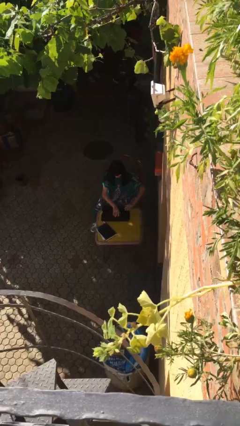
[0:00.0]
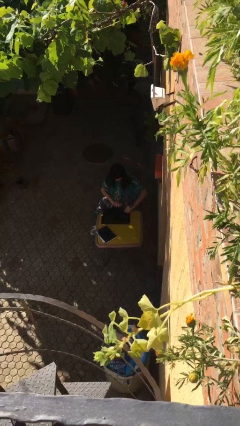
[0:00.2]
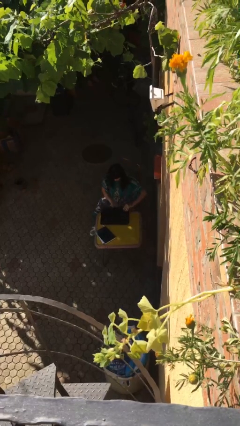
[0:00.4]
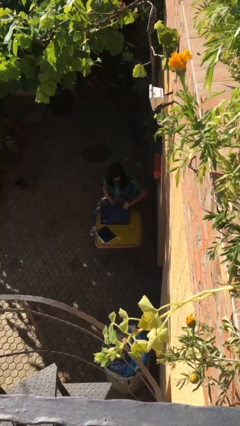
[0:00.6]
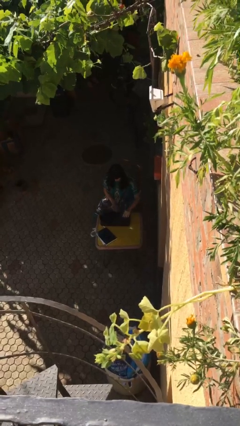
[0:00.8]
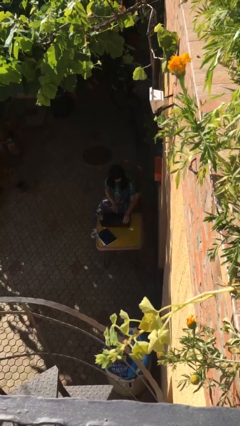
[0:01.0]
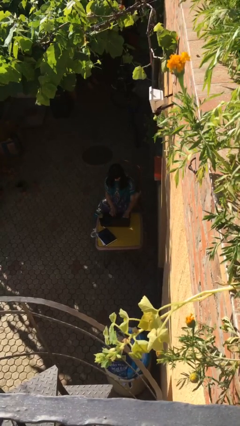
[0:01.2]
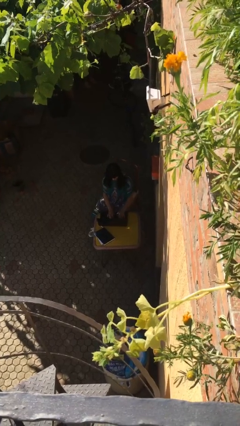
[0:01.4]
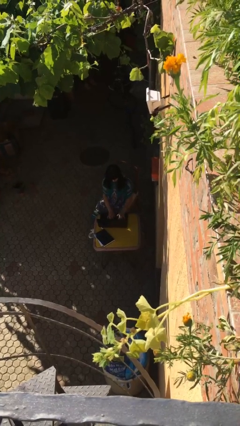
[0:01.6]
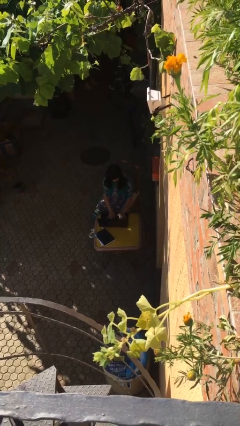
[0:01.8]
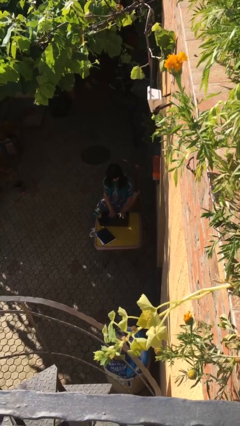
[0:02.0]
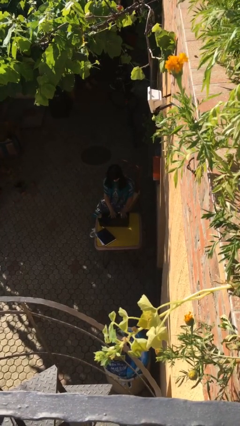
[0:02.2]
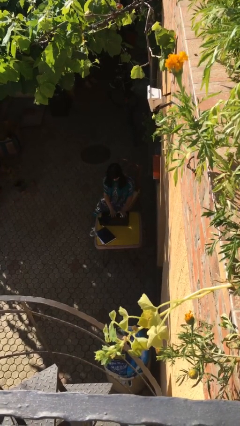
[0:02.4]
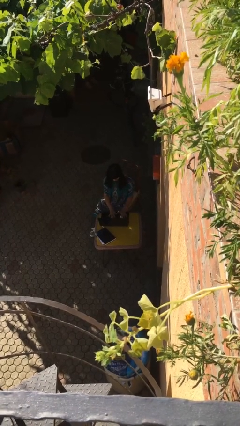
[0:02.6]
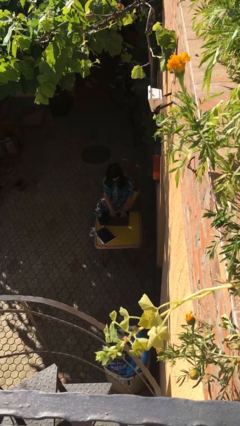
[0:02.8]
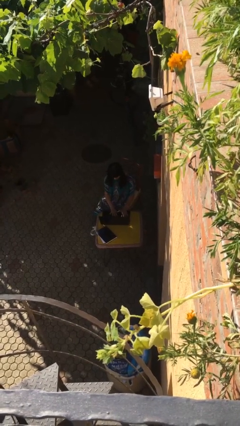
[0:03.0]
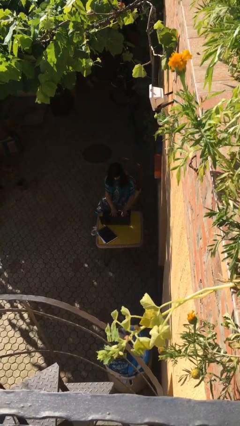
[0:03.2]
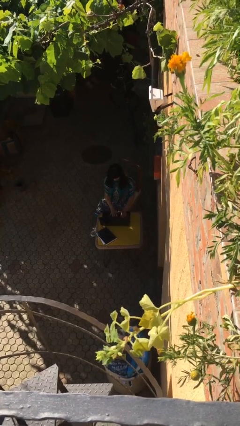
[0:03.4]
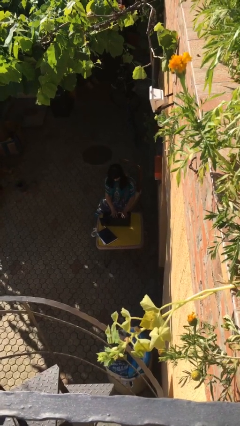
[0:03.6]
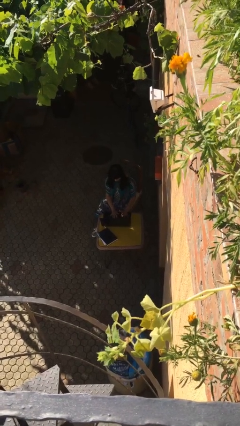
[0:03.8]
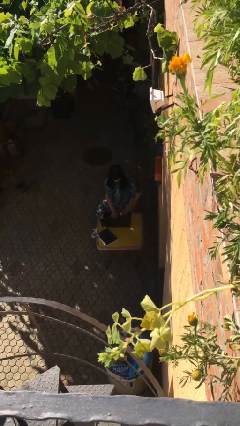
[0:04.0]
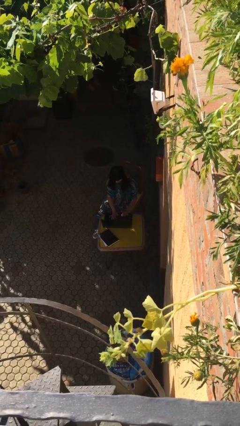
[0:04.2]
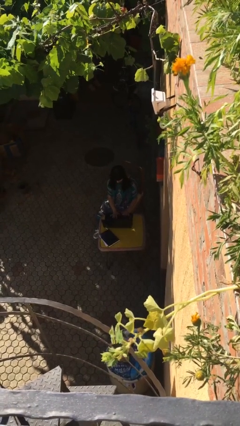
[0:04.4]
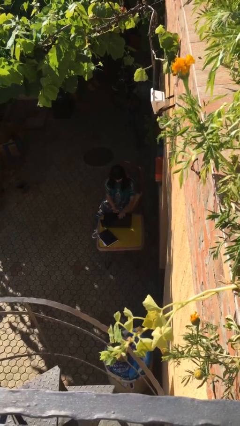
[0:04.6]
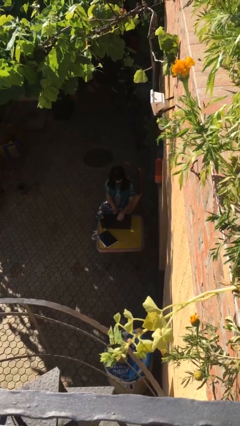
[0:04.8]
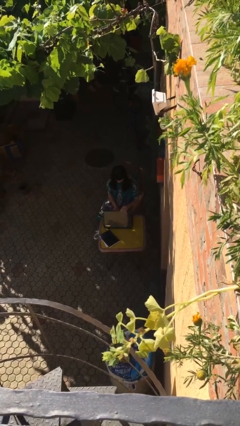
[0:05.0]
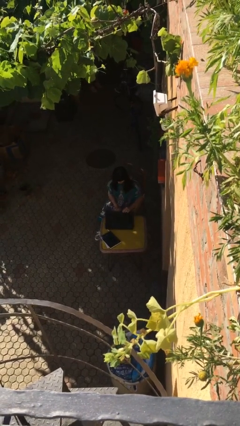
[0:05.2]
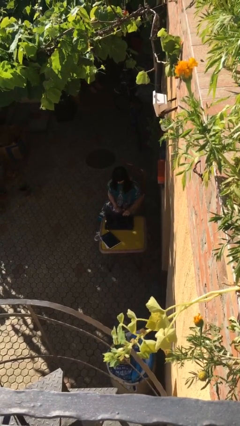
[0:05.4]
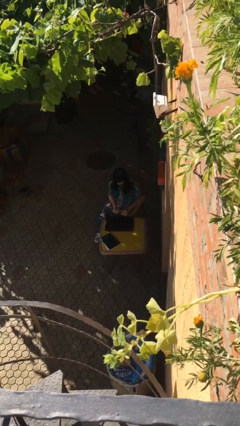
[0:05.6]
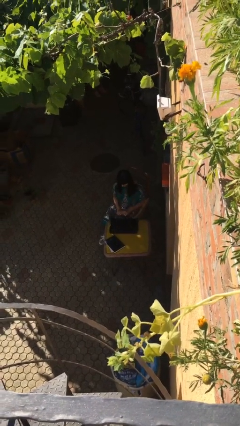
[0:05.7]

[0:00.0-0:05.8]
person interacts with laptop

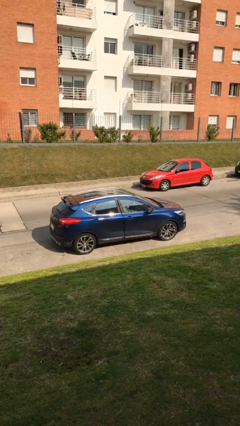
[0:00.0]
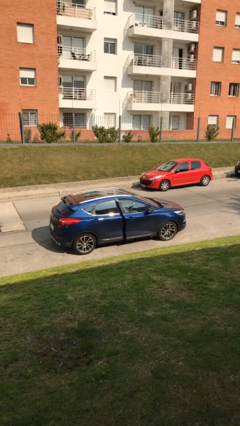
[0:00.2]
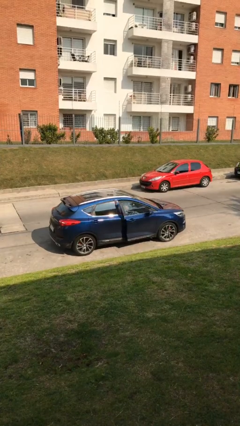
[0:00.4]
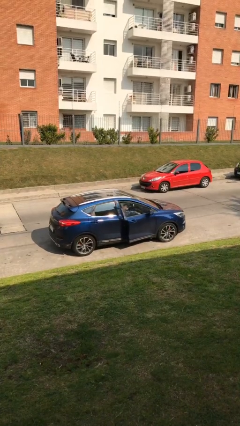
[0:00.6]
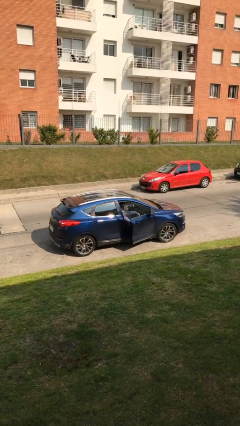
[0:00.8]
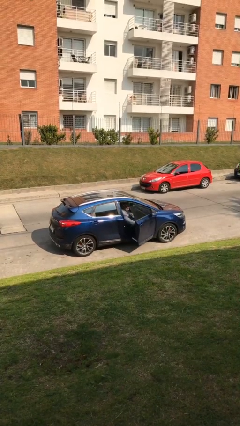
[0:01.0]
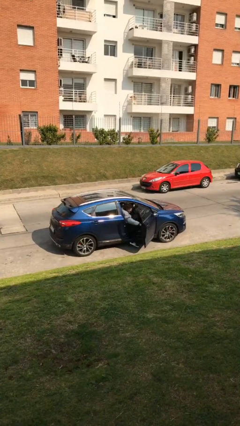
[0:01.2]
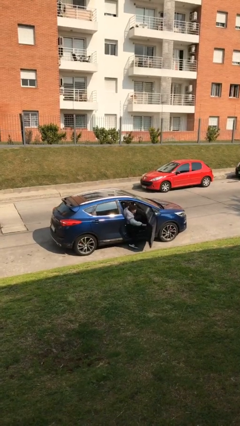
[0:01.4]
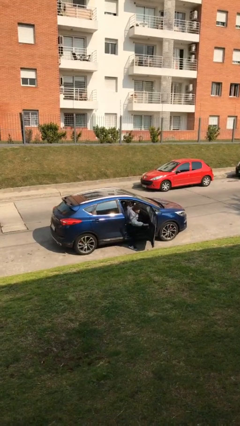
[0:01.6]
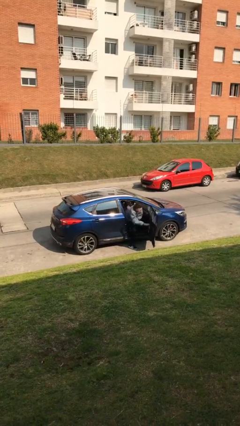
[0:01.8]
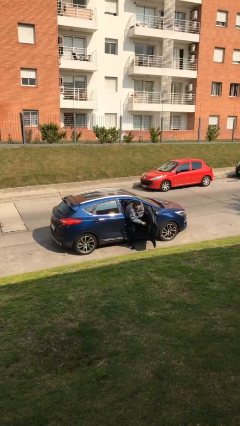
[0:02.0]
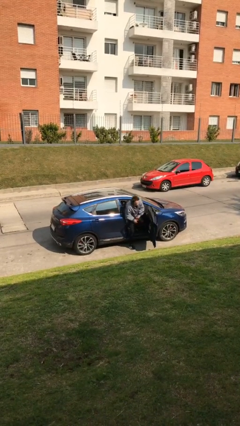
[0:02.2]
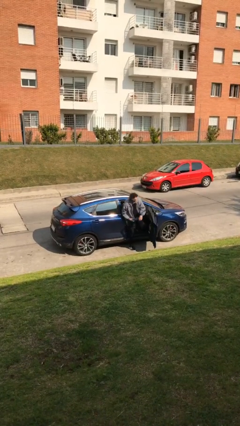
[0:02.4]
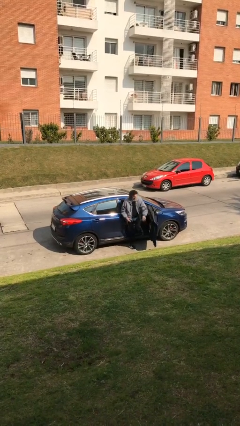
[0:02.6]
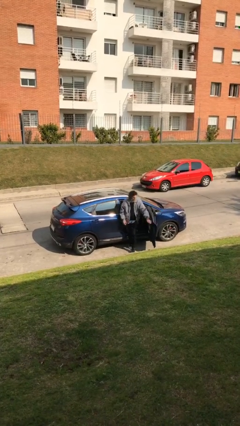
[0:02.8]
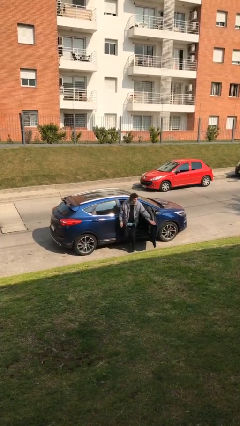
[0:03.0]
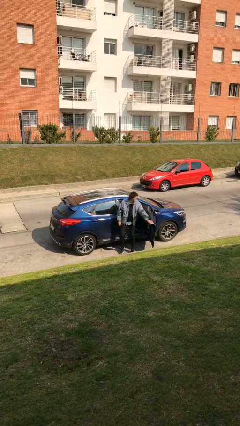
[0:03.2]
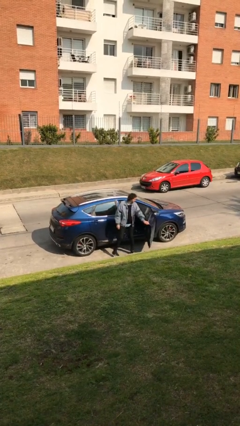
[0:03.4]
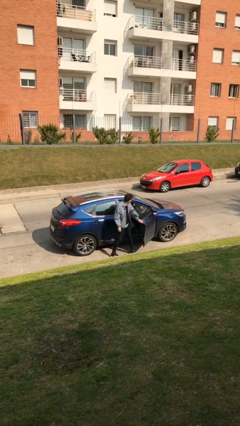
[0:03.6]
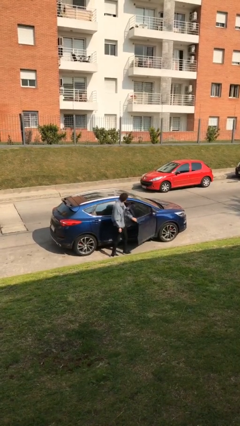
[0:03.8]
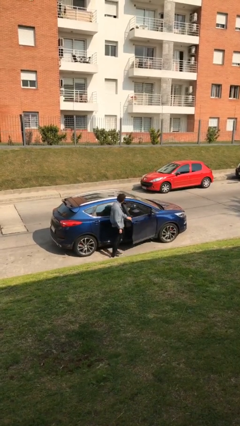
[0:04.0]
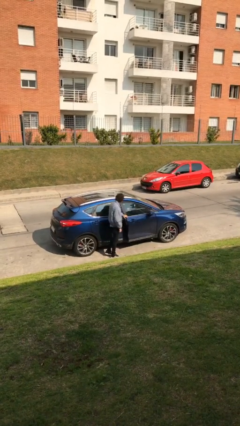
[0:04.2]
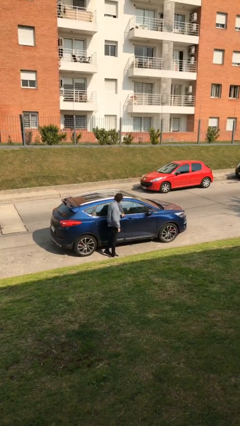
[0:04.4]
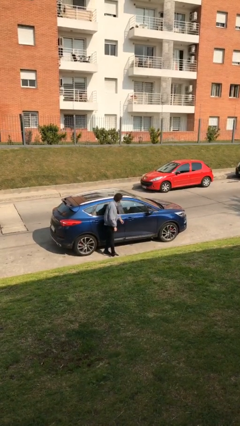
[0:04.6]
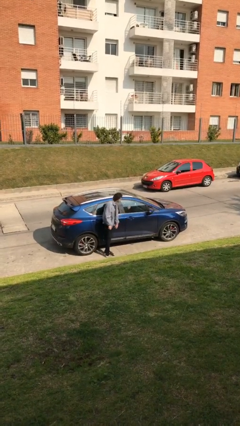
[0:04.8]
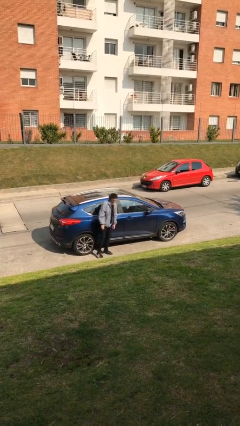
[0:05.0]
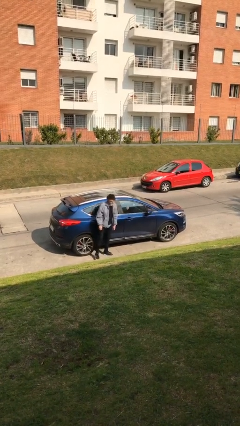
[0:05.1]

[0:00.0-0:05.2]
car drops off person

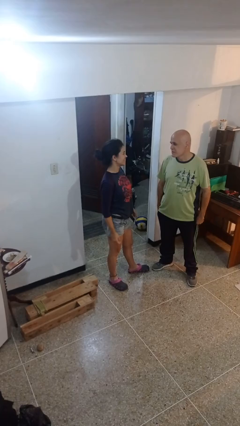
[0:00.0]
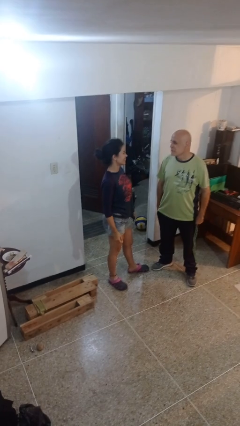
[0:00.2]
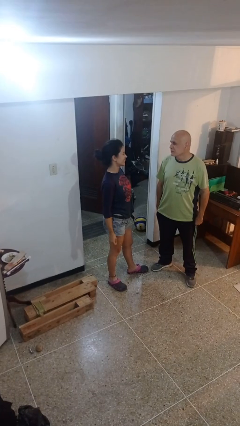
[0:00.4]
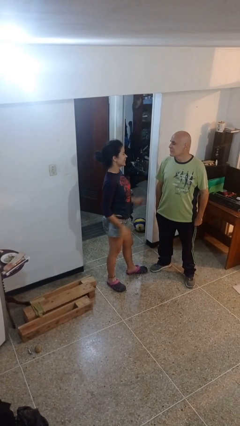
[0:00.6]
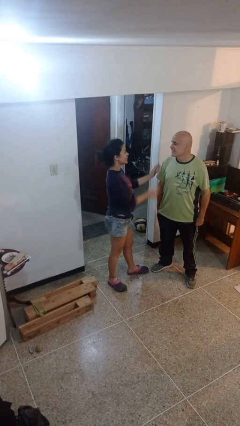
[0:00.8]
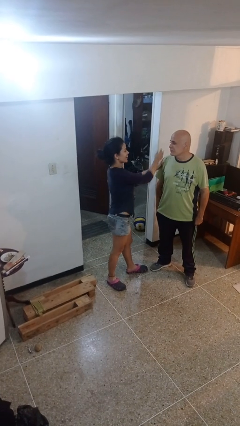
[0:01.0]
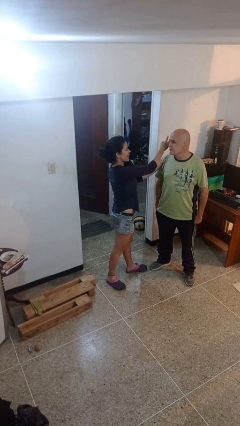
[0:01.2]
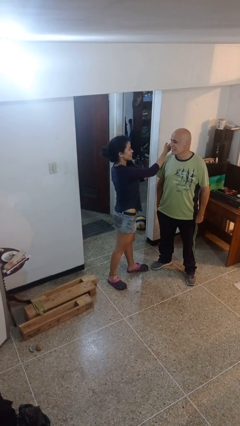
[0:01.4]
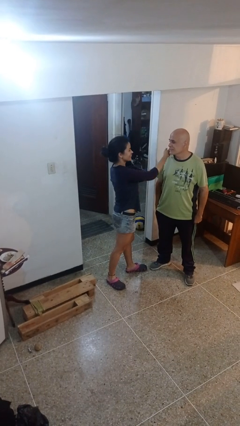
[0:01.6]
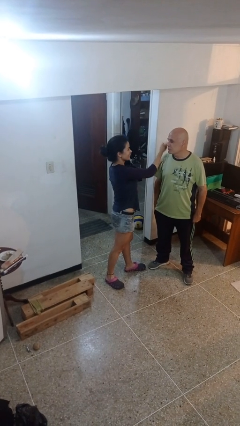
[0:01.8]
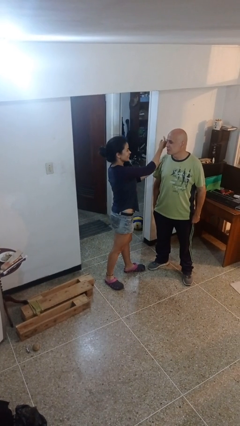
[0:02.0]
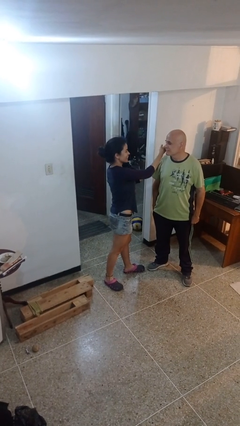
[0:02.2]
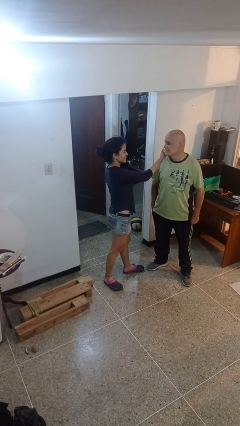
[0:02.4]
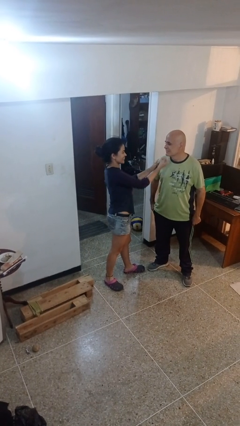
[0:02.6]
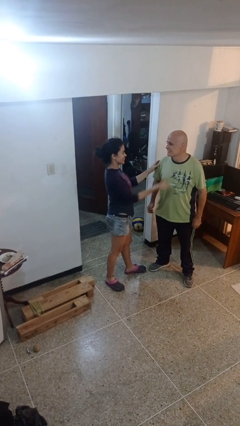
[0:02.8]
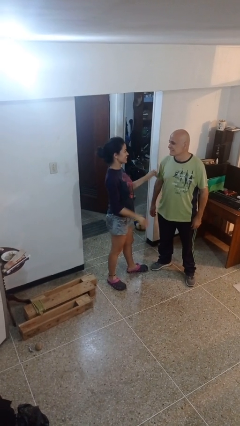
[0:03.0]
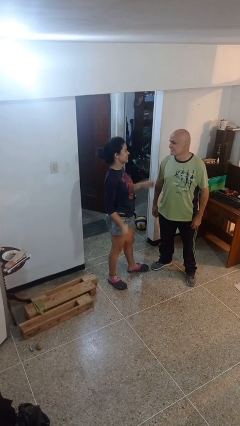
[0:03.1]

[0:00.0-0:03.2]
person touches face of person

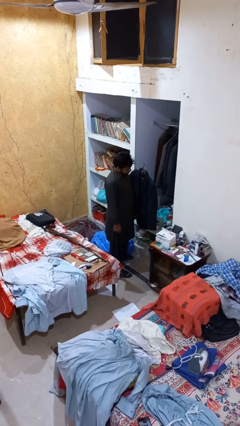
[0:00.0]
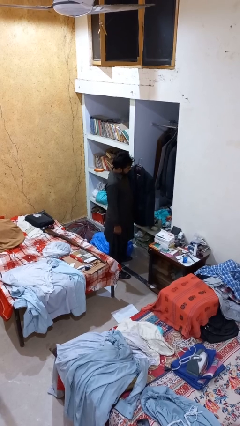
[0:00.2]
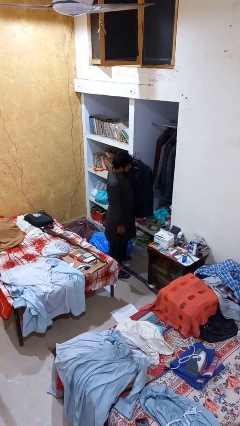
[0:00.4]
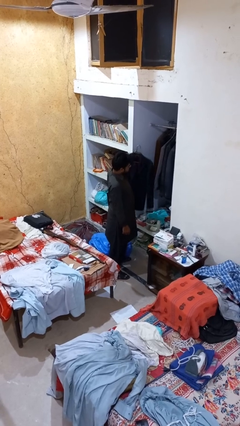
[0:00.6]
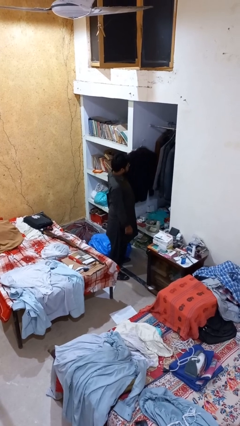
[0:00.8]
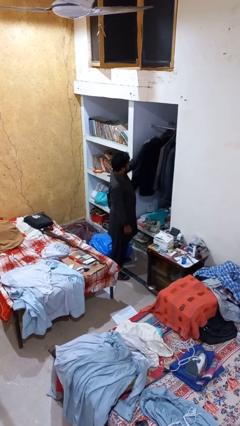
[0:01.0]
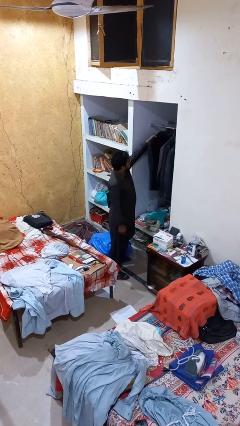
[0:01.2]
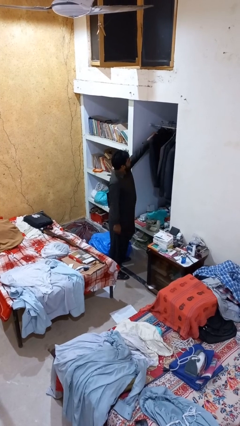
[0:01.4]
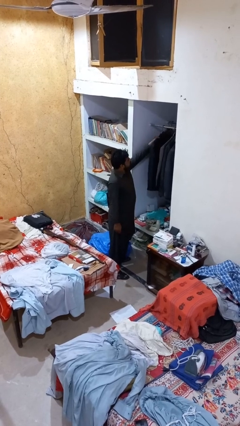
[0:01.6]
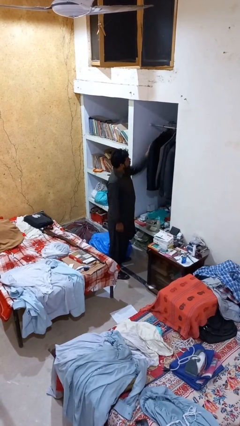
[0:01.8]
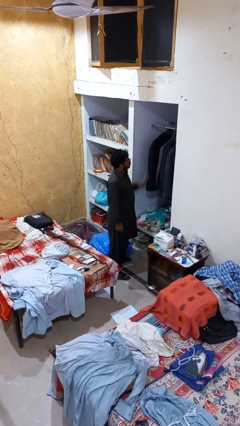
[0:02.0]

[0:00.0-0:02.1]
person puts clothes into closet

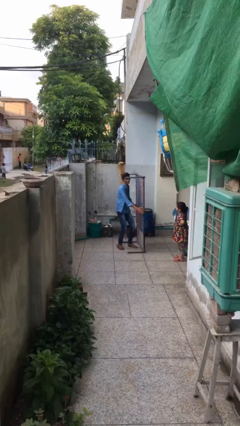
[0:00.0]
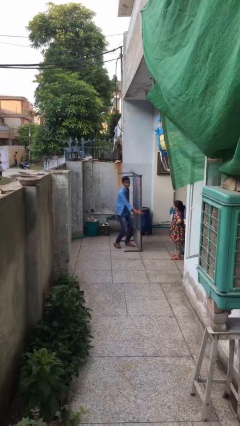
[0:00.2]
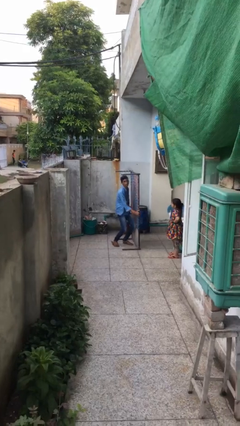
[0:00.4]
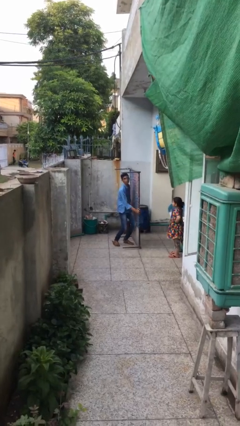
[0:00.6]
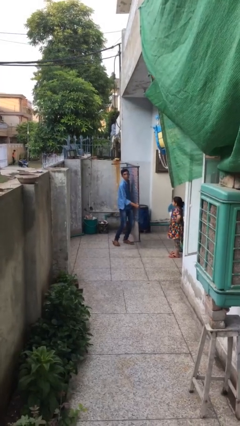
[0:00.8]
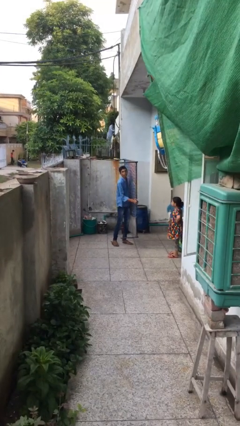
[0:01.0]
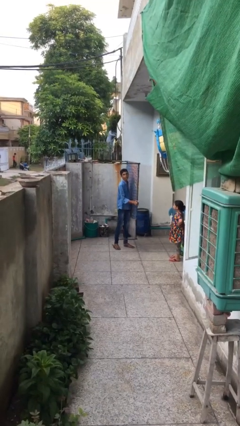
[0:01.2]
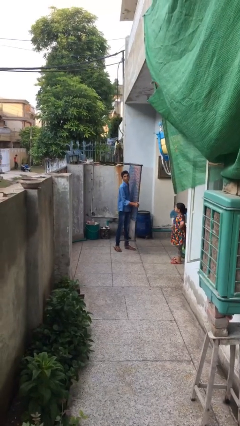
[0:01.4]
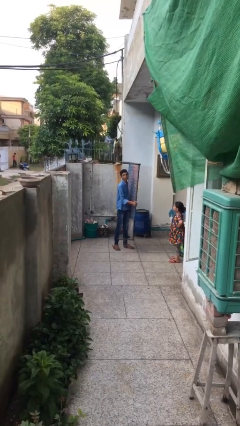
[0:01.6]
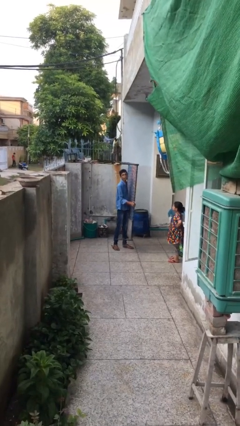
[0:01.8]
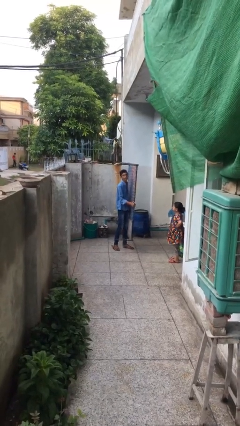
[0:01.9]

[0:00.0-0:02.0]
person picks up object from floor
